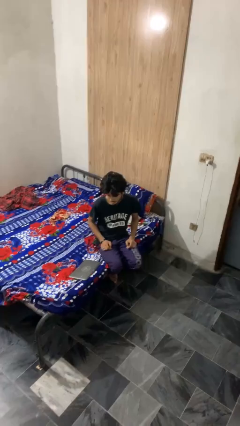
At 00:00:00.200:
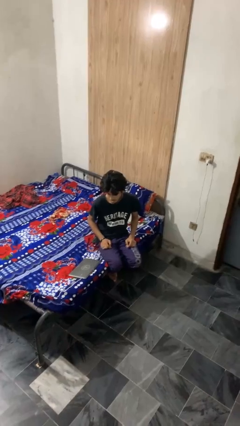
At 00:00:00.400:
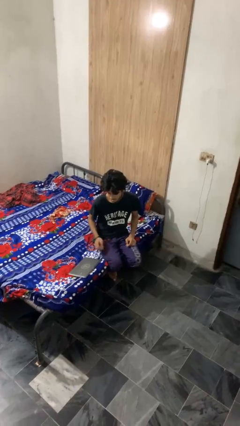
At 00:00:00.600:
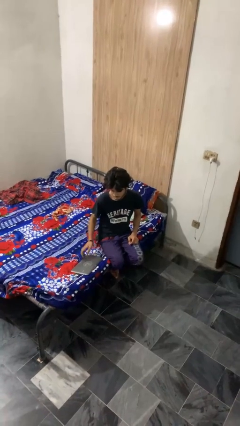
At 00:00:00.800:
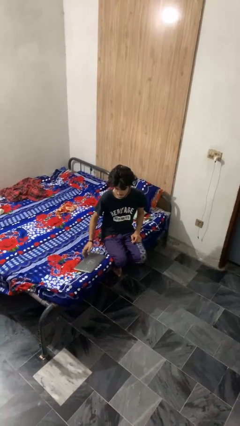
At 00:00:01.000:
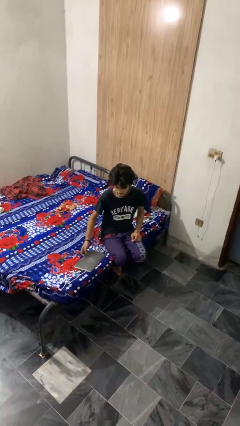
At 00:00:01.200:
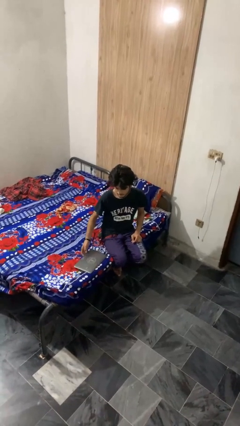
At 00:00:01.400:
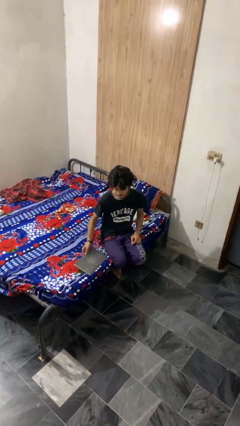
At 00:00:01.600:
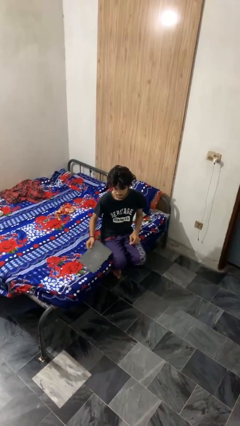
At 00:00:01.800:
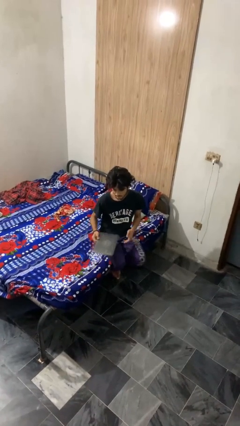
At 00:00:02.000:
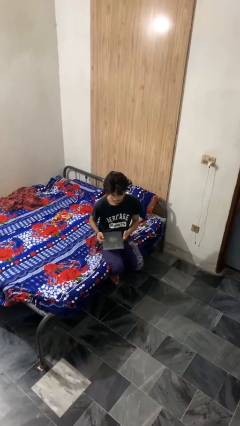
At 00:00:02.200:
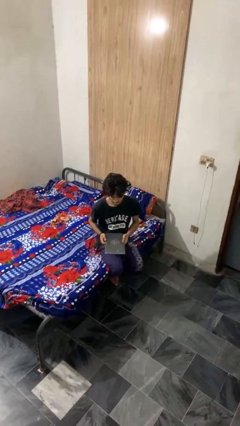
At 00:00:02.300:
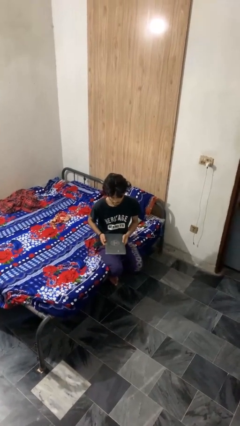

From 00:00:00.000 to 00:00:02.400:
person picks up object from bed

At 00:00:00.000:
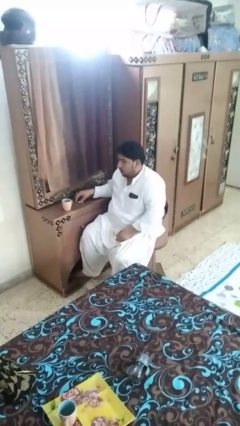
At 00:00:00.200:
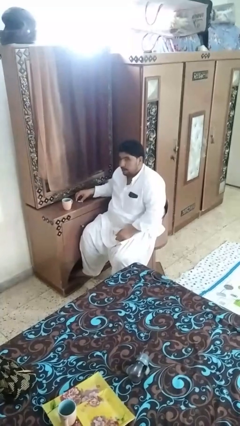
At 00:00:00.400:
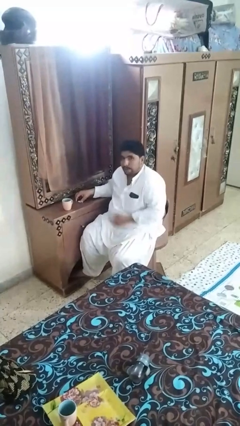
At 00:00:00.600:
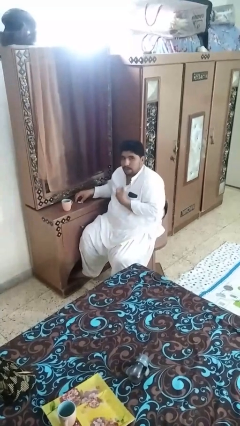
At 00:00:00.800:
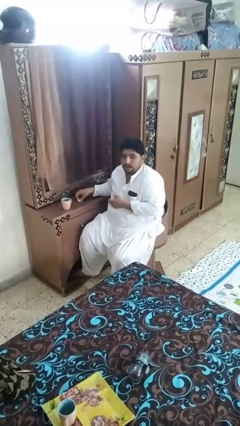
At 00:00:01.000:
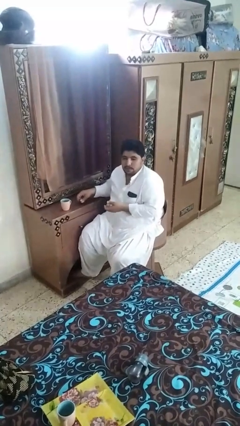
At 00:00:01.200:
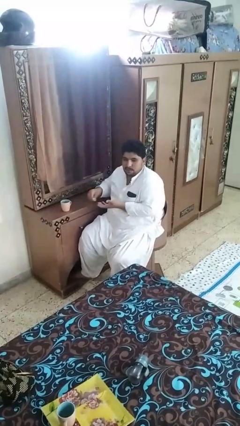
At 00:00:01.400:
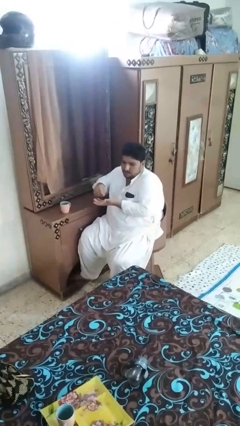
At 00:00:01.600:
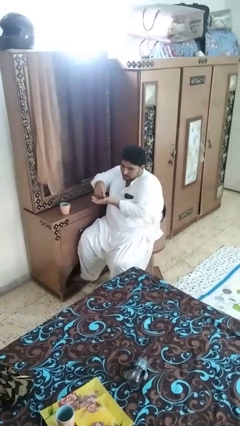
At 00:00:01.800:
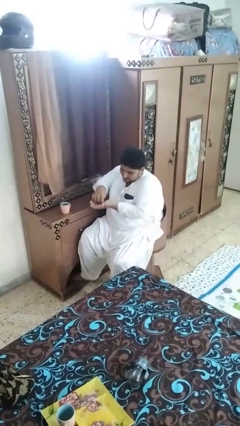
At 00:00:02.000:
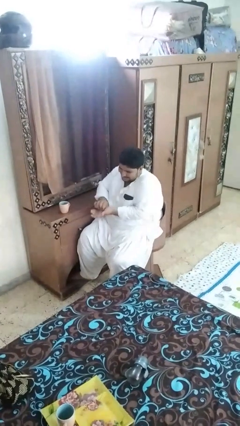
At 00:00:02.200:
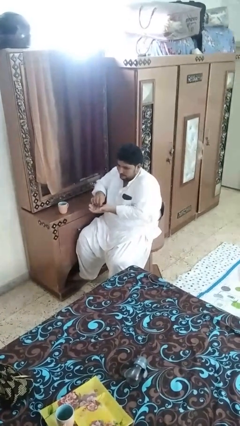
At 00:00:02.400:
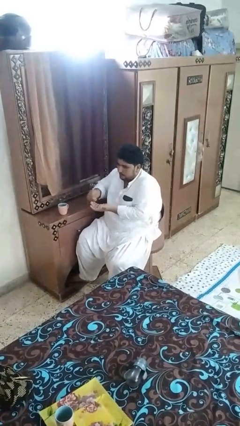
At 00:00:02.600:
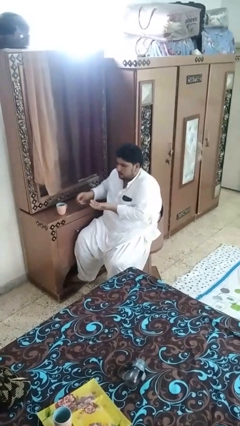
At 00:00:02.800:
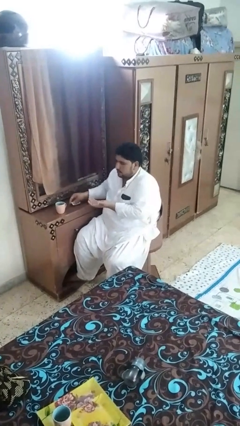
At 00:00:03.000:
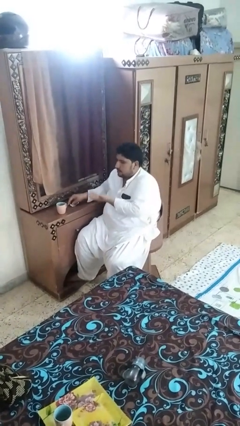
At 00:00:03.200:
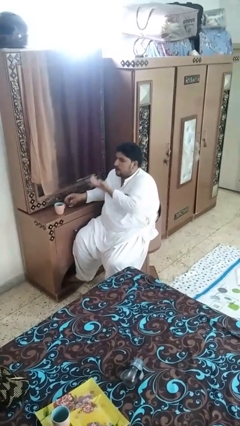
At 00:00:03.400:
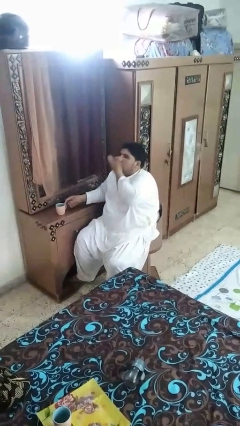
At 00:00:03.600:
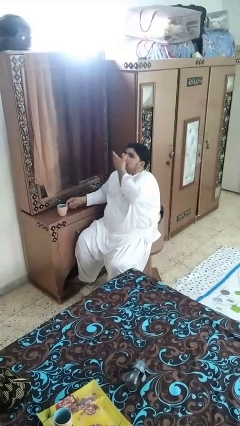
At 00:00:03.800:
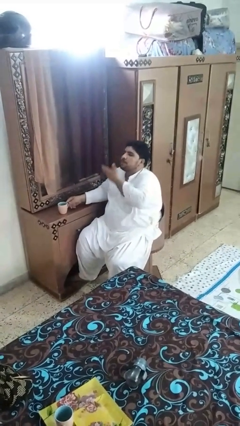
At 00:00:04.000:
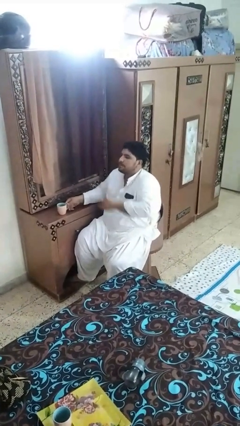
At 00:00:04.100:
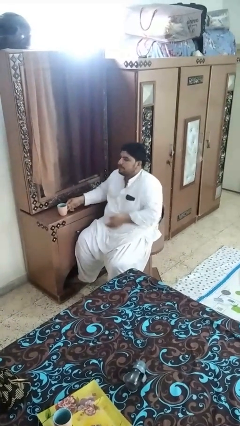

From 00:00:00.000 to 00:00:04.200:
person takes medicine pills

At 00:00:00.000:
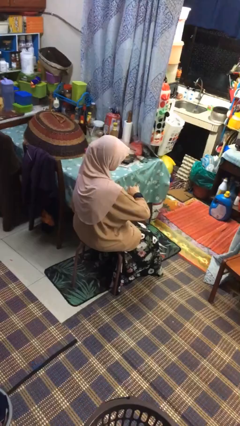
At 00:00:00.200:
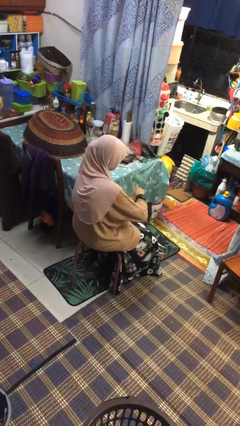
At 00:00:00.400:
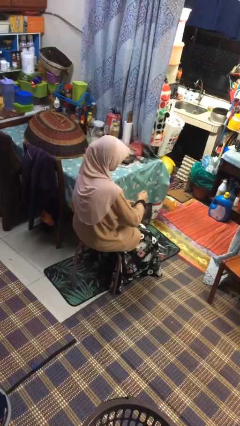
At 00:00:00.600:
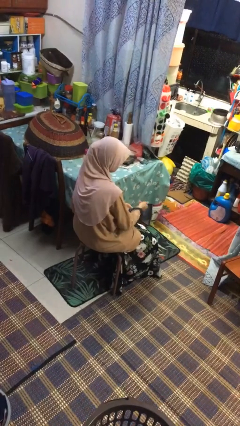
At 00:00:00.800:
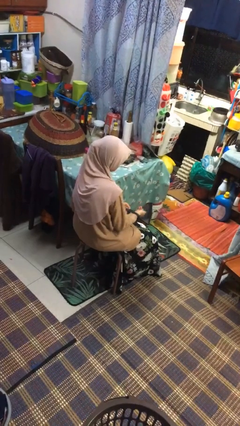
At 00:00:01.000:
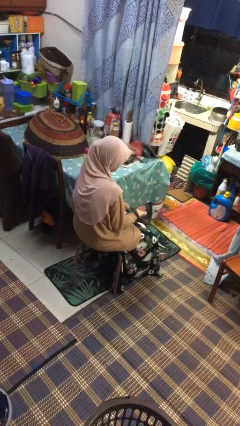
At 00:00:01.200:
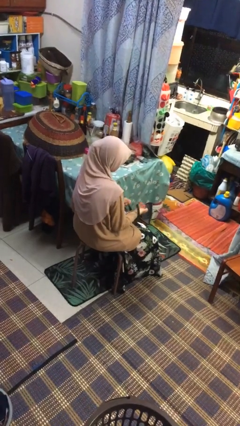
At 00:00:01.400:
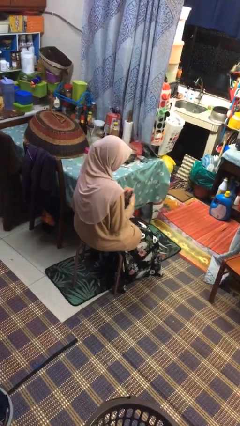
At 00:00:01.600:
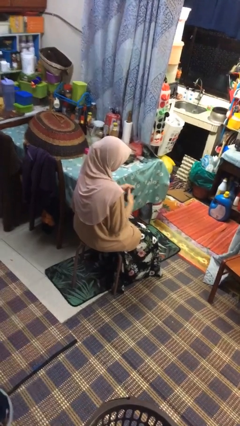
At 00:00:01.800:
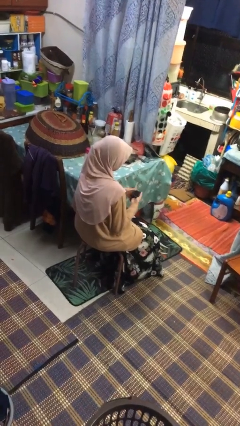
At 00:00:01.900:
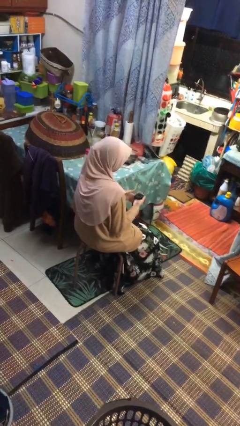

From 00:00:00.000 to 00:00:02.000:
person takes off wristwatch

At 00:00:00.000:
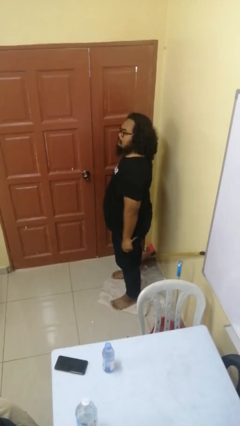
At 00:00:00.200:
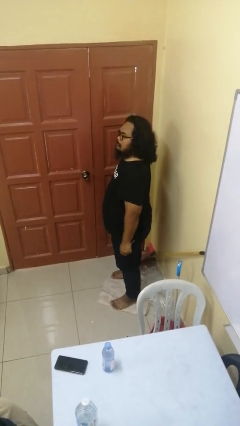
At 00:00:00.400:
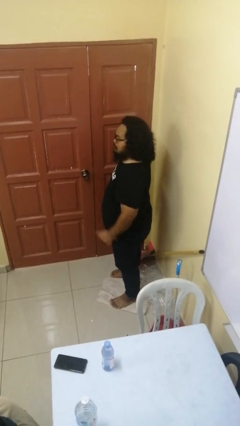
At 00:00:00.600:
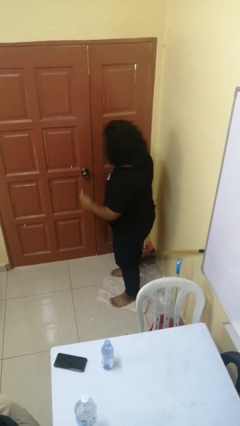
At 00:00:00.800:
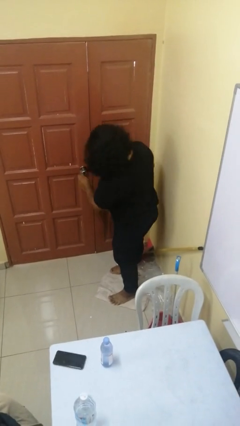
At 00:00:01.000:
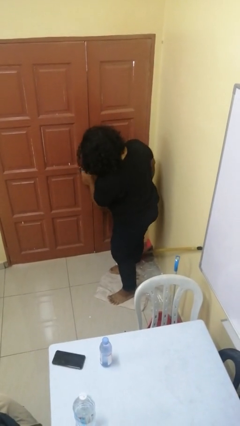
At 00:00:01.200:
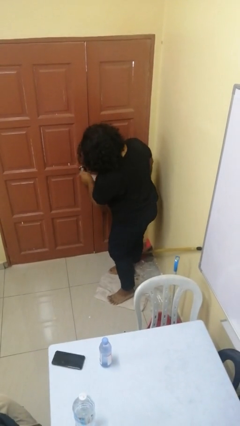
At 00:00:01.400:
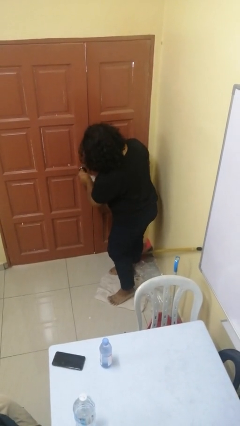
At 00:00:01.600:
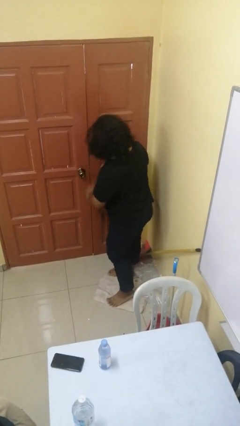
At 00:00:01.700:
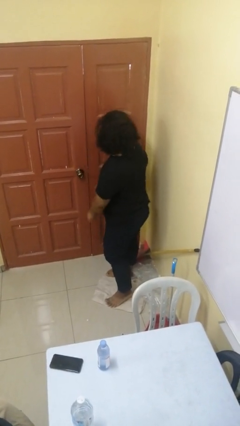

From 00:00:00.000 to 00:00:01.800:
person unlocks door with keys

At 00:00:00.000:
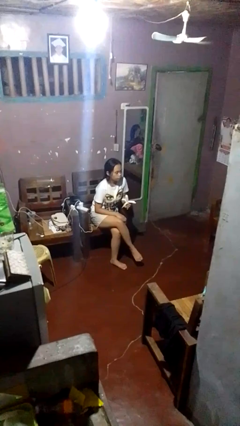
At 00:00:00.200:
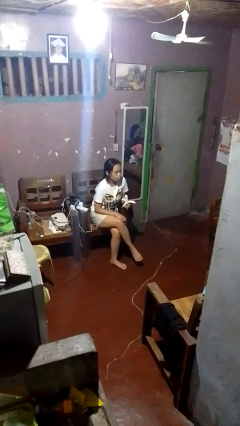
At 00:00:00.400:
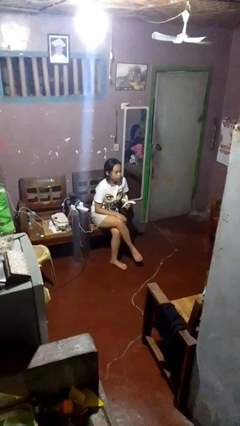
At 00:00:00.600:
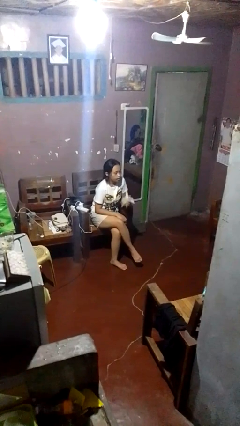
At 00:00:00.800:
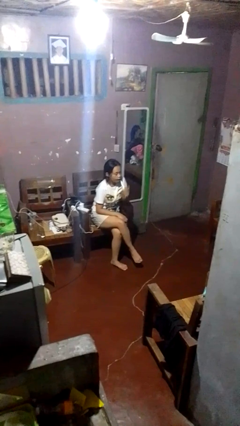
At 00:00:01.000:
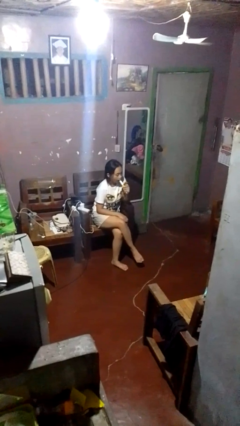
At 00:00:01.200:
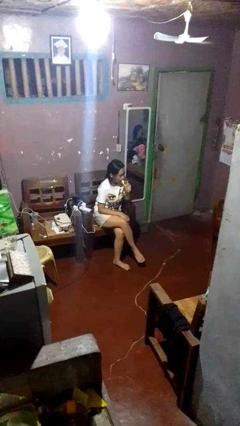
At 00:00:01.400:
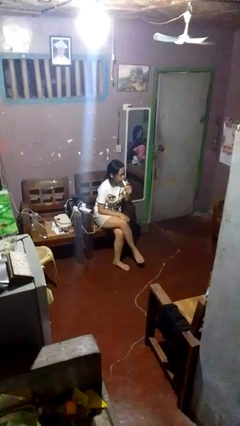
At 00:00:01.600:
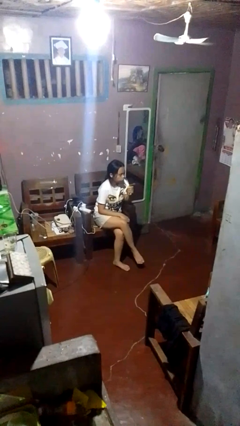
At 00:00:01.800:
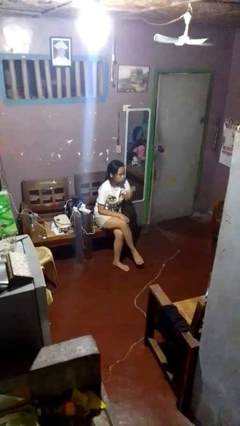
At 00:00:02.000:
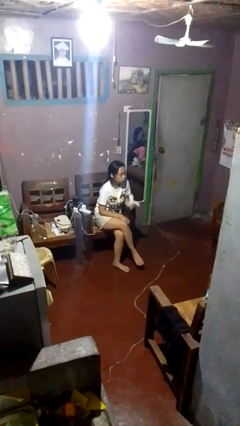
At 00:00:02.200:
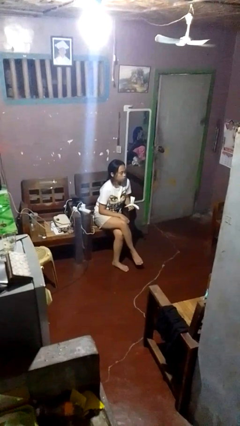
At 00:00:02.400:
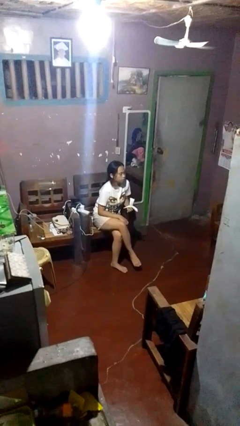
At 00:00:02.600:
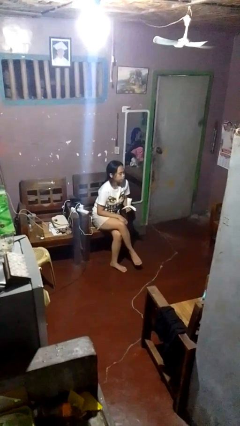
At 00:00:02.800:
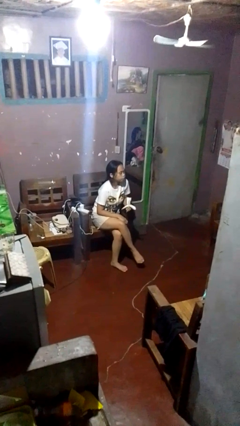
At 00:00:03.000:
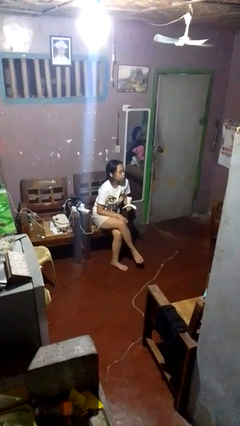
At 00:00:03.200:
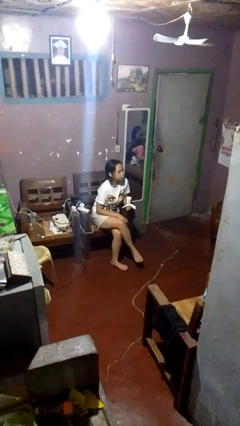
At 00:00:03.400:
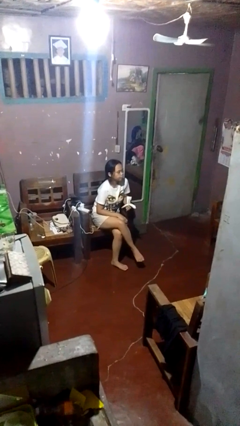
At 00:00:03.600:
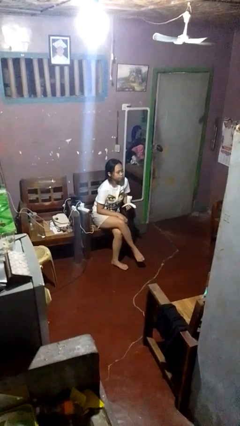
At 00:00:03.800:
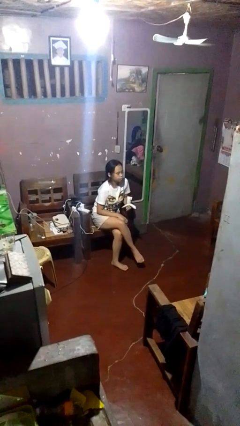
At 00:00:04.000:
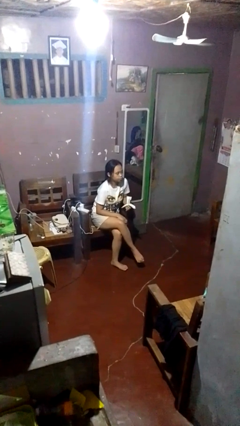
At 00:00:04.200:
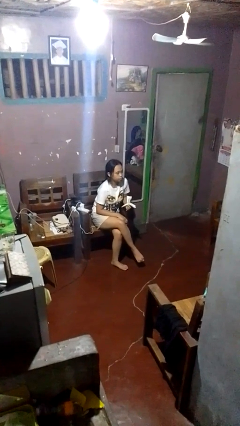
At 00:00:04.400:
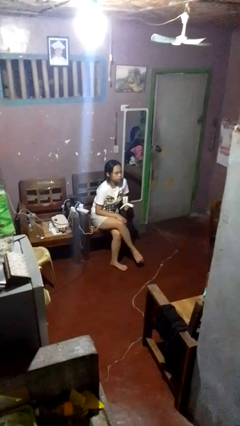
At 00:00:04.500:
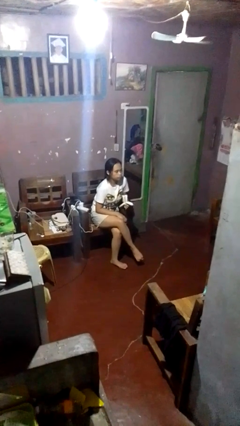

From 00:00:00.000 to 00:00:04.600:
person eats banana

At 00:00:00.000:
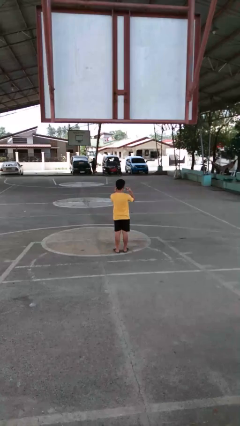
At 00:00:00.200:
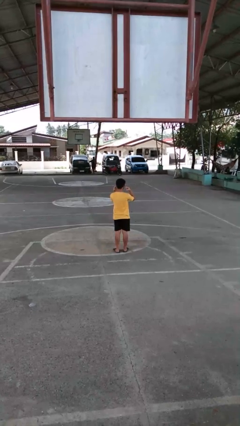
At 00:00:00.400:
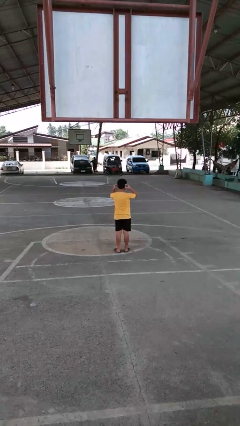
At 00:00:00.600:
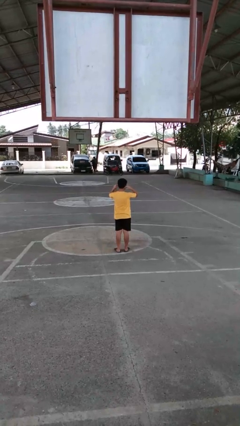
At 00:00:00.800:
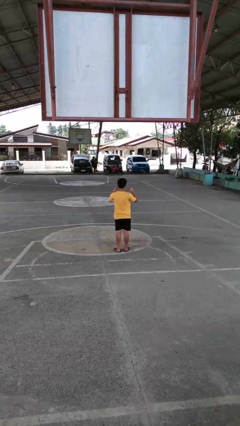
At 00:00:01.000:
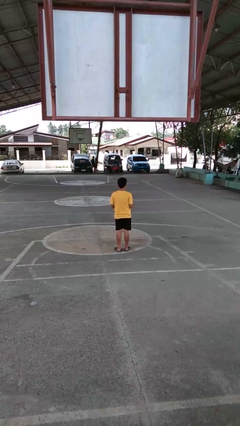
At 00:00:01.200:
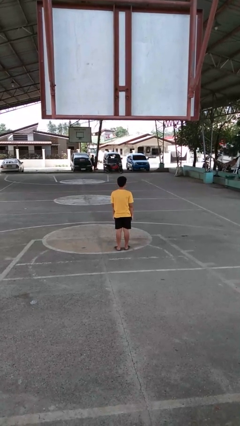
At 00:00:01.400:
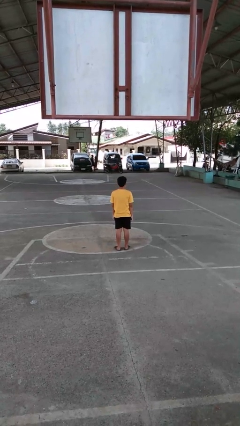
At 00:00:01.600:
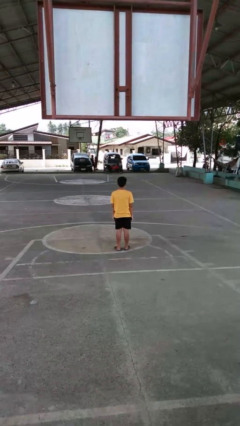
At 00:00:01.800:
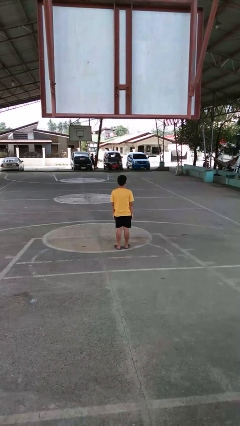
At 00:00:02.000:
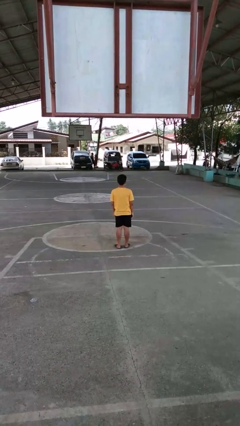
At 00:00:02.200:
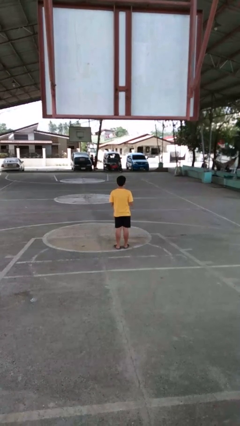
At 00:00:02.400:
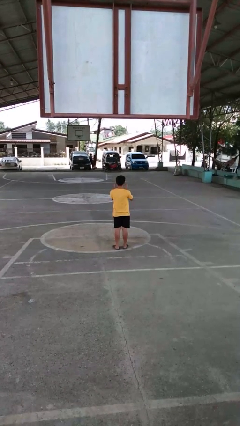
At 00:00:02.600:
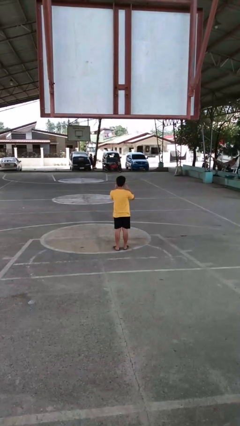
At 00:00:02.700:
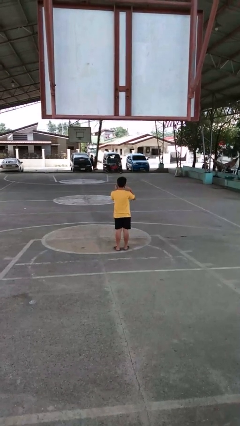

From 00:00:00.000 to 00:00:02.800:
person puts on facemask
